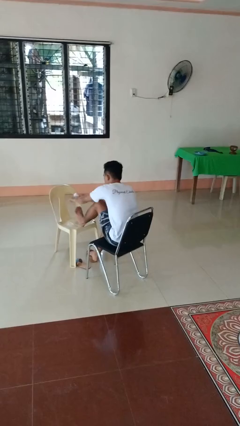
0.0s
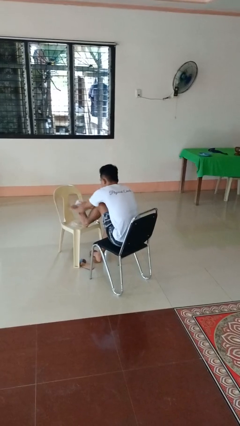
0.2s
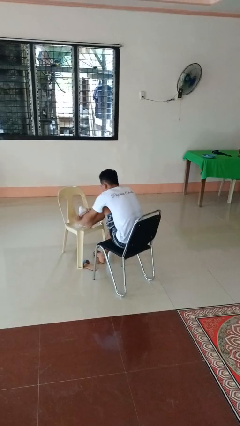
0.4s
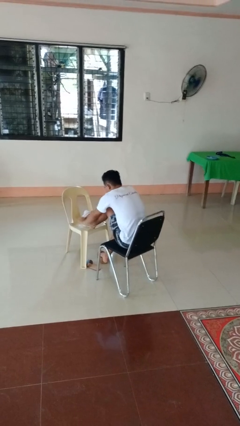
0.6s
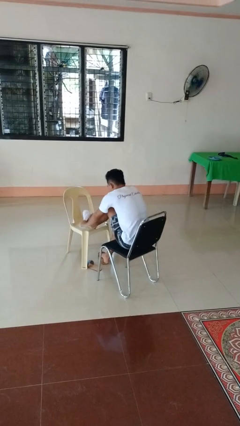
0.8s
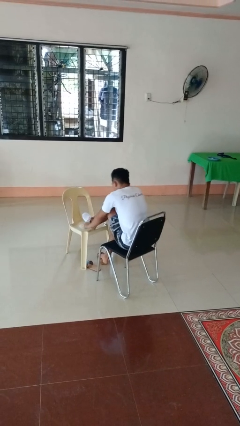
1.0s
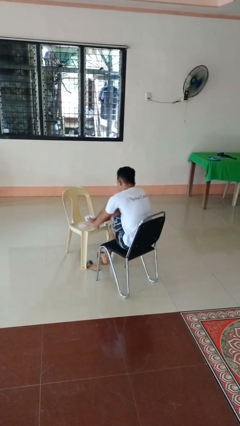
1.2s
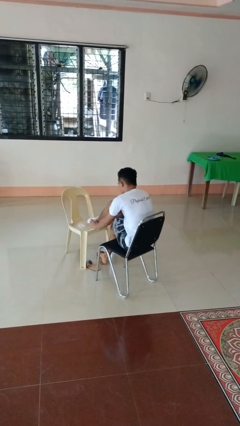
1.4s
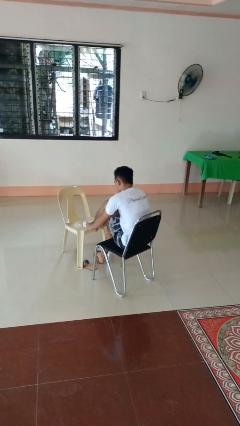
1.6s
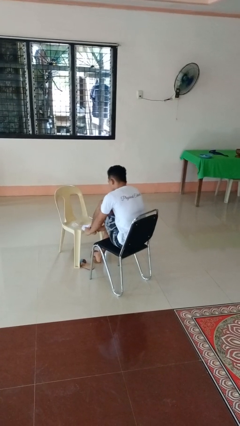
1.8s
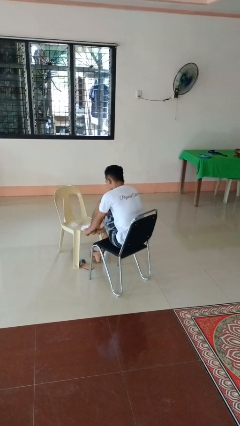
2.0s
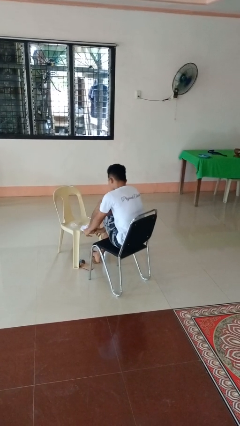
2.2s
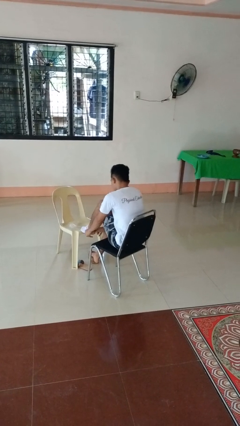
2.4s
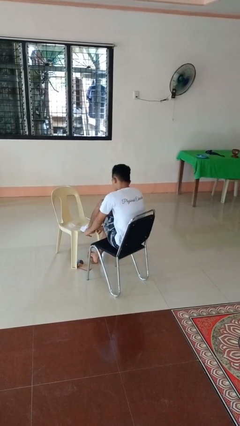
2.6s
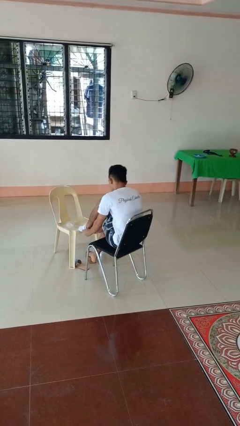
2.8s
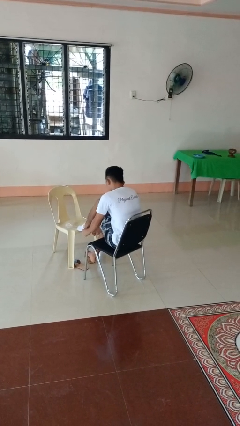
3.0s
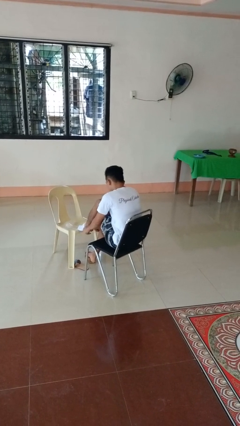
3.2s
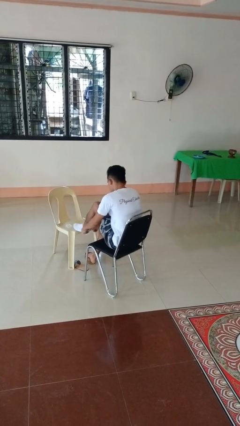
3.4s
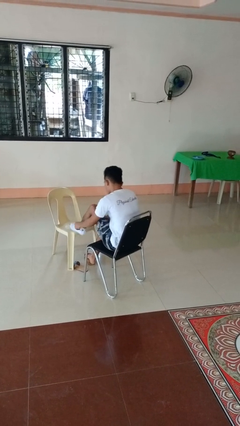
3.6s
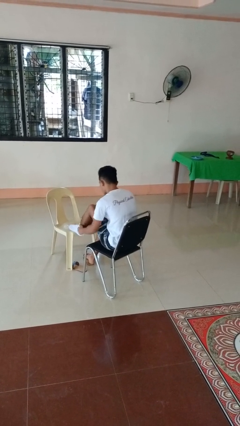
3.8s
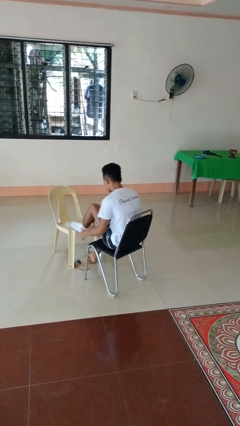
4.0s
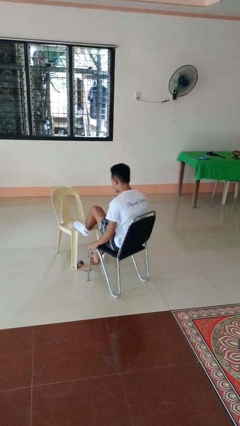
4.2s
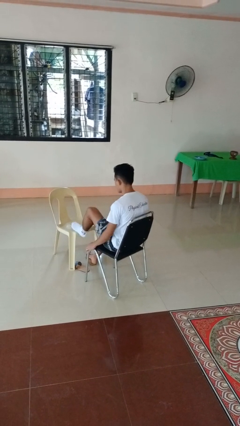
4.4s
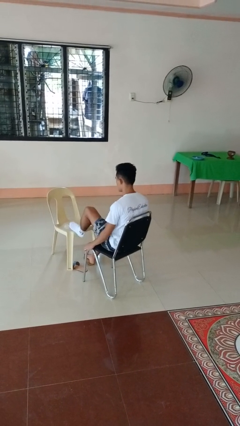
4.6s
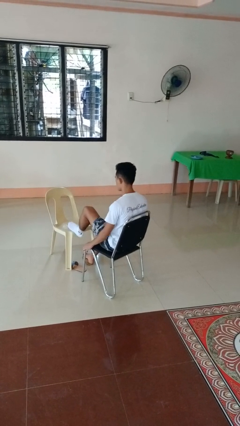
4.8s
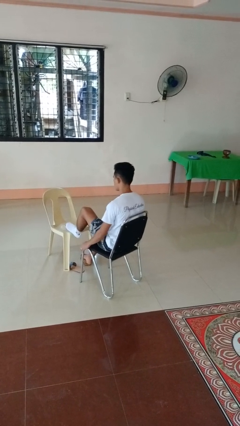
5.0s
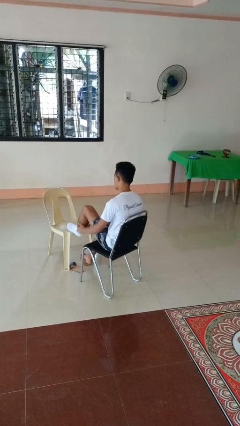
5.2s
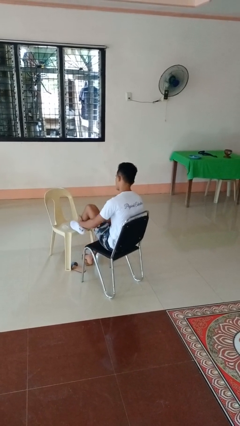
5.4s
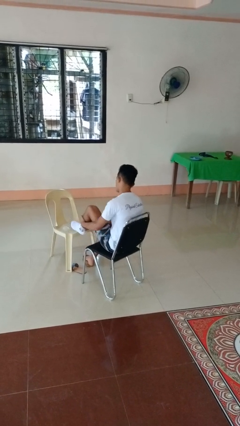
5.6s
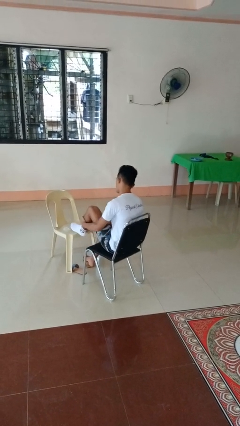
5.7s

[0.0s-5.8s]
person puts on socks

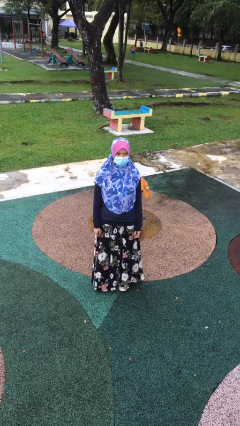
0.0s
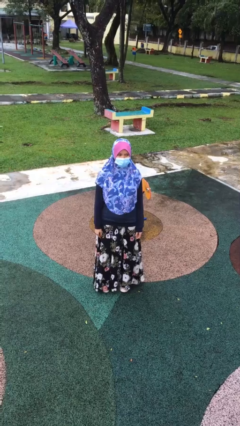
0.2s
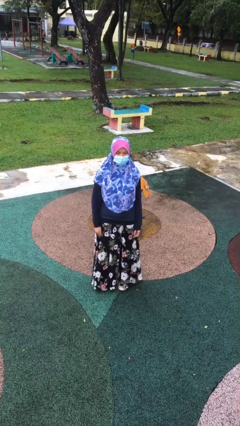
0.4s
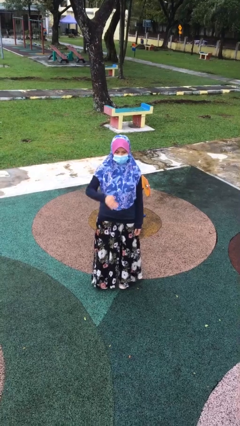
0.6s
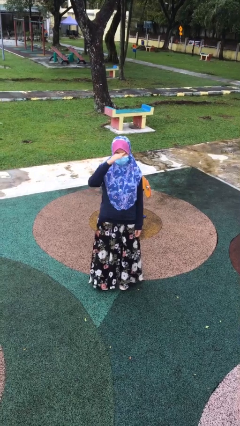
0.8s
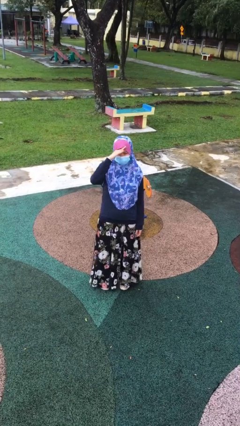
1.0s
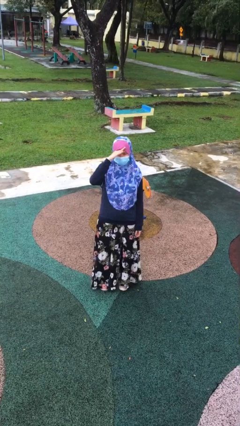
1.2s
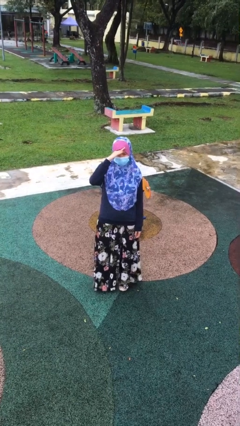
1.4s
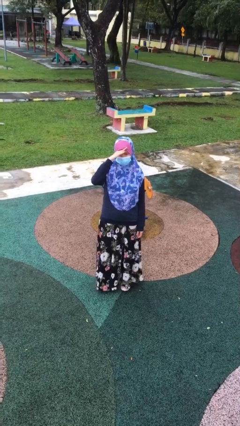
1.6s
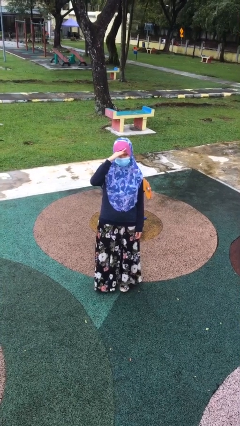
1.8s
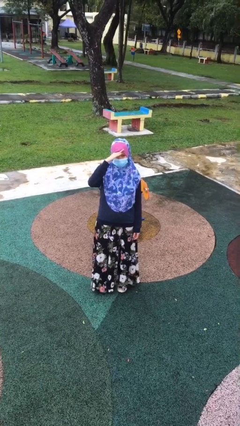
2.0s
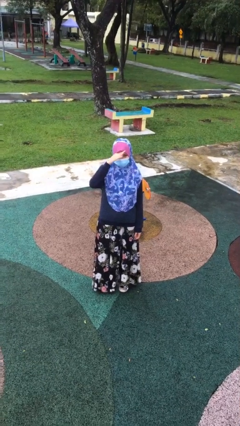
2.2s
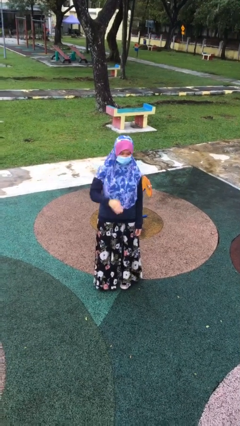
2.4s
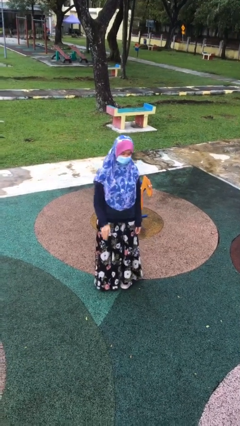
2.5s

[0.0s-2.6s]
person salutes

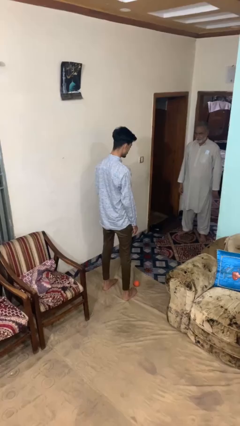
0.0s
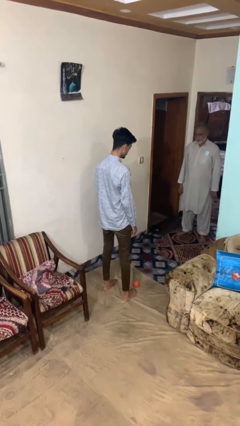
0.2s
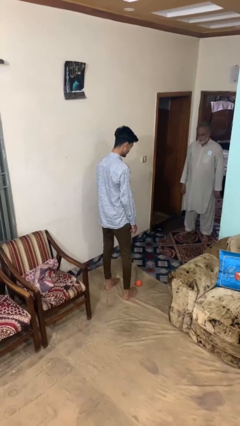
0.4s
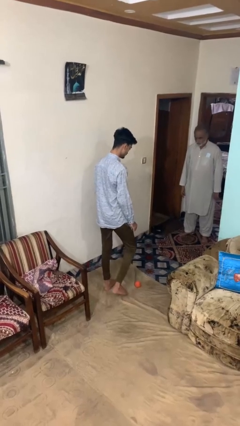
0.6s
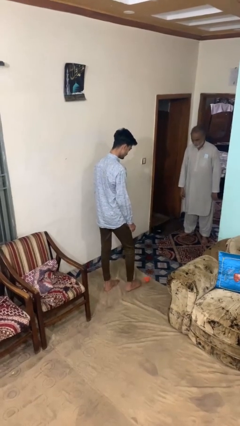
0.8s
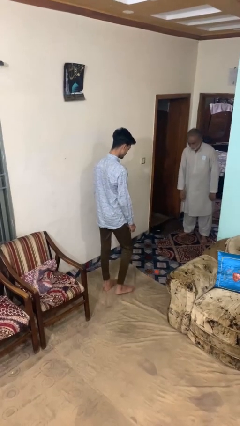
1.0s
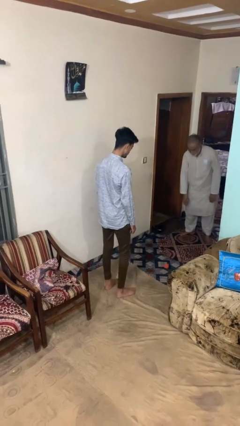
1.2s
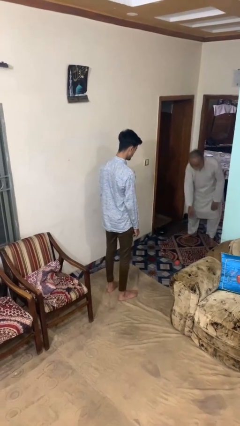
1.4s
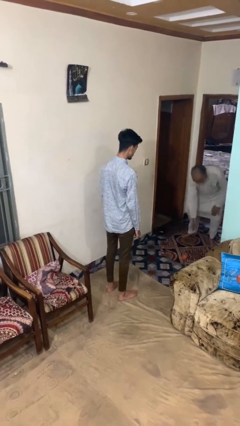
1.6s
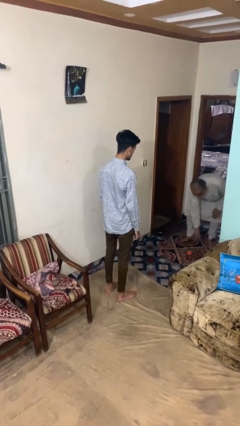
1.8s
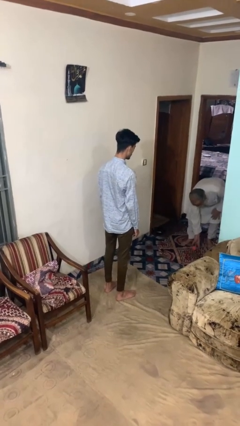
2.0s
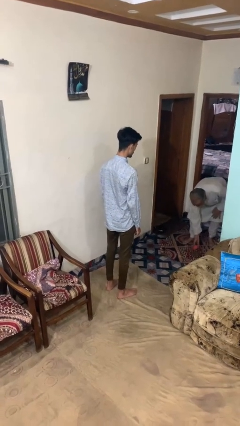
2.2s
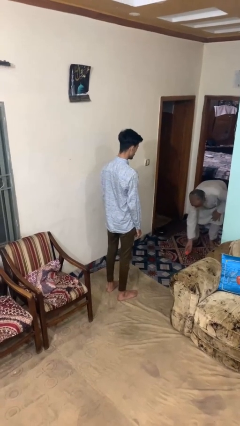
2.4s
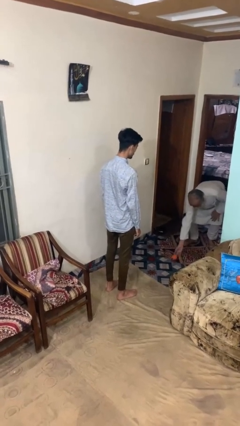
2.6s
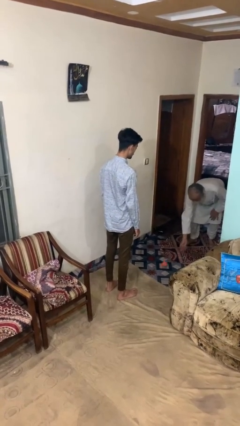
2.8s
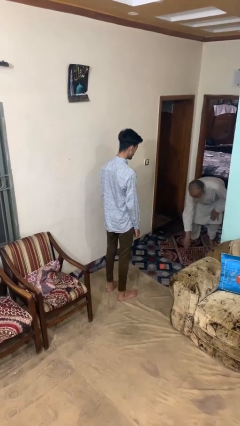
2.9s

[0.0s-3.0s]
person kicks object to person

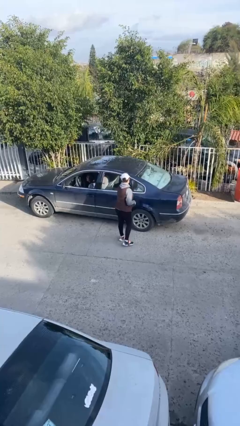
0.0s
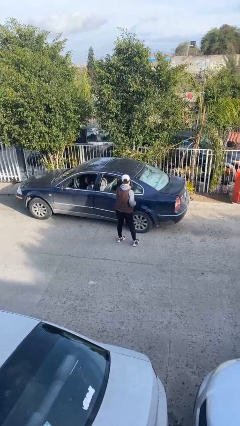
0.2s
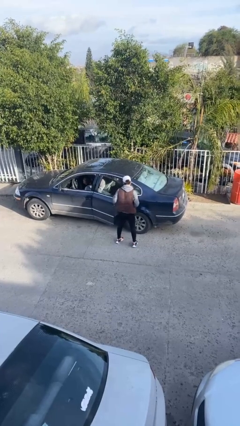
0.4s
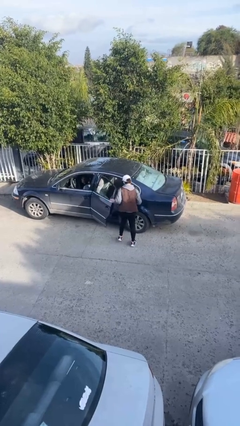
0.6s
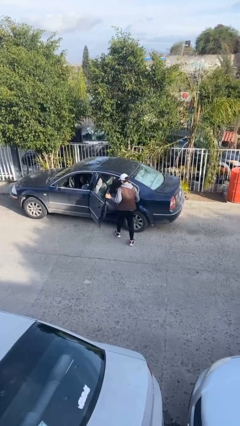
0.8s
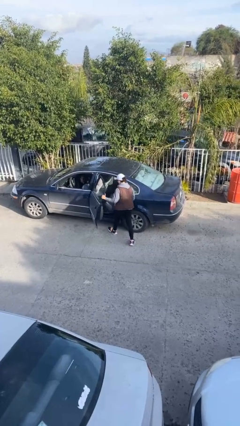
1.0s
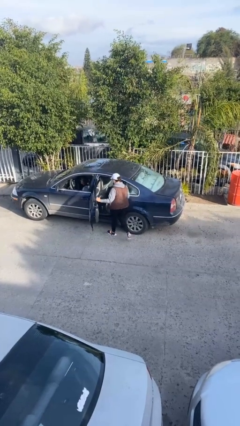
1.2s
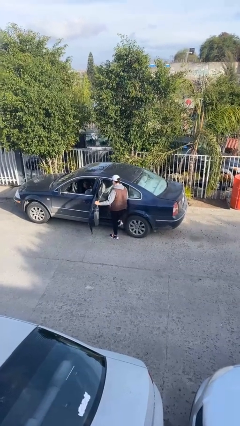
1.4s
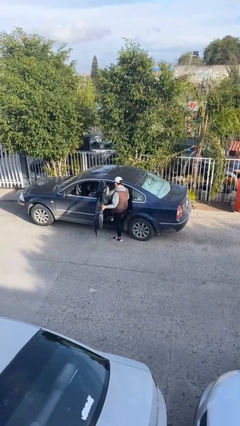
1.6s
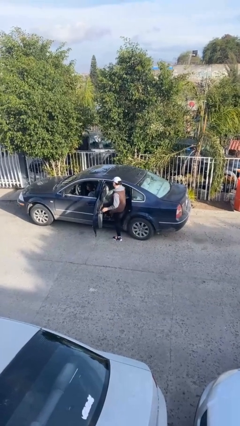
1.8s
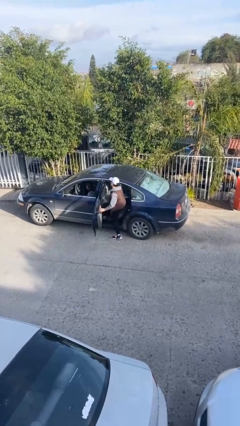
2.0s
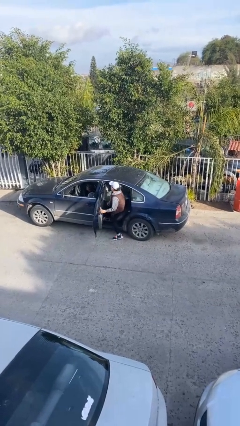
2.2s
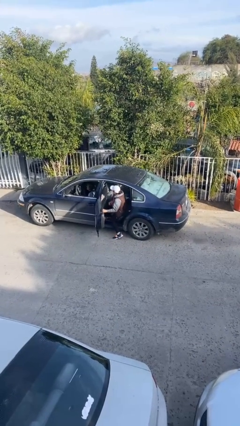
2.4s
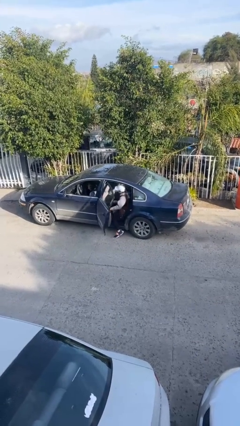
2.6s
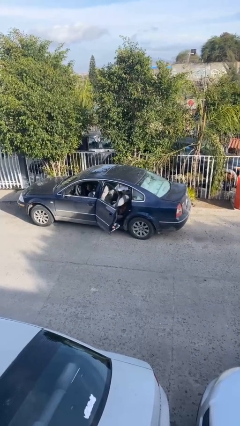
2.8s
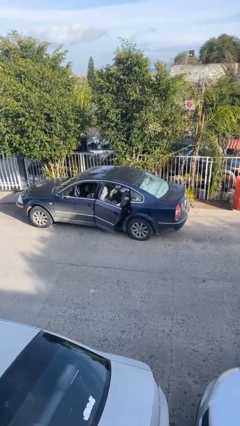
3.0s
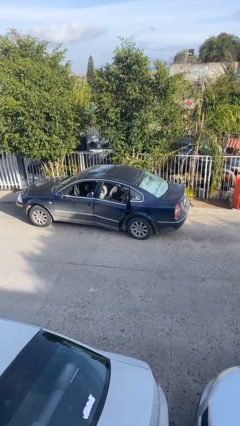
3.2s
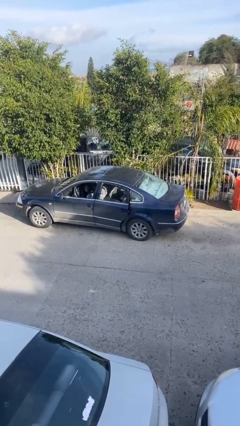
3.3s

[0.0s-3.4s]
car picks up person

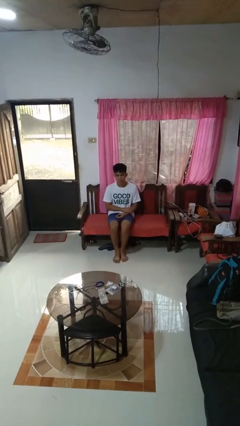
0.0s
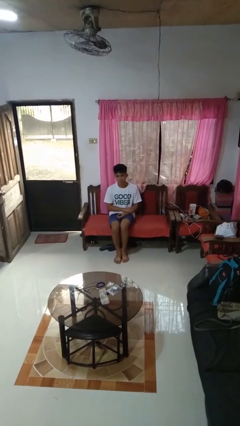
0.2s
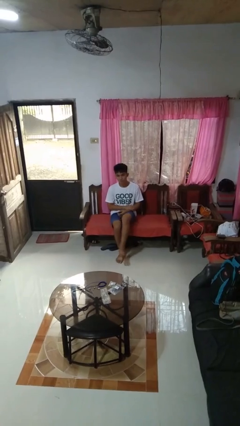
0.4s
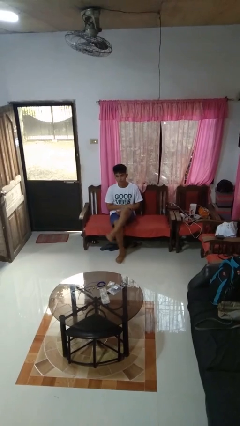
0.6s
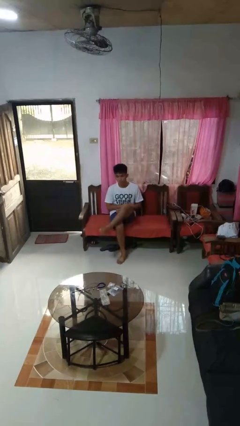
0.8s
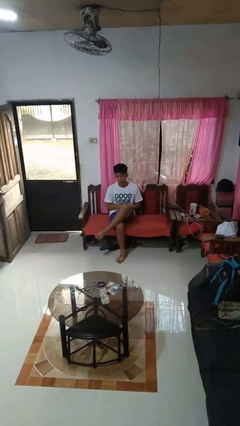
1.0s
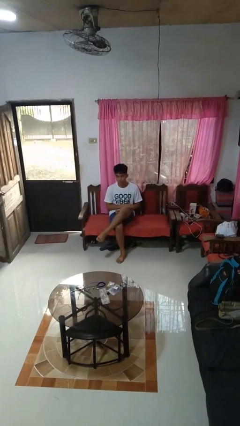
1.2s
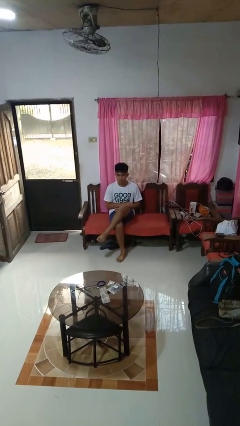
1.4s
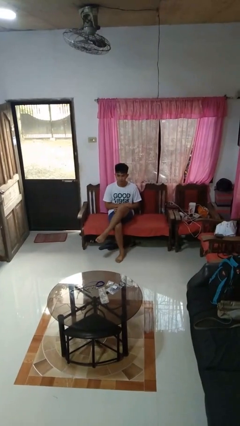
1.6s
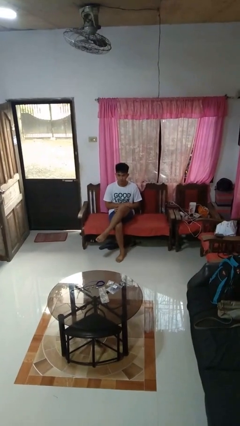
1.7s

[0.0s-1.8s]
person crosses legs

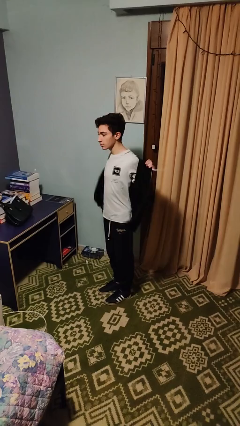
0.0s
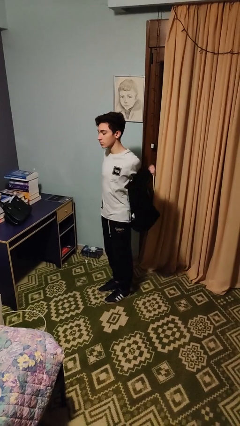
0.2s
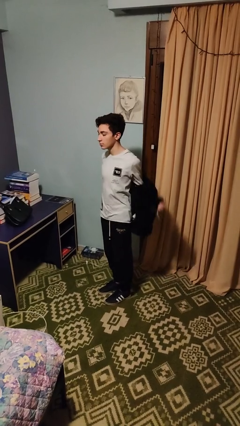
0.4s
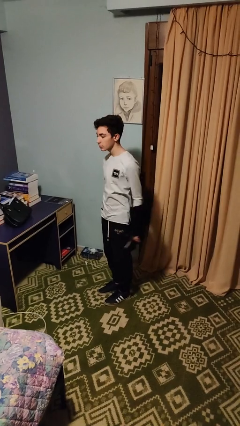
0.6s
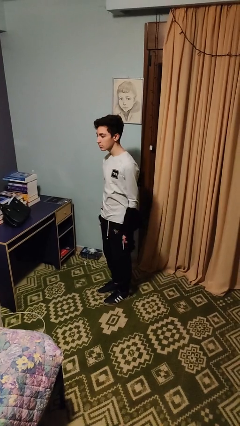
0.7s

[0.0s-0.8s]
person takes off jacket
